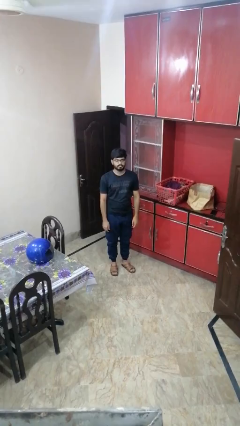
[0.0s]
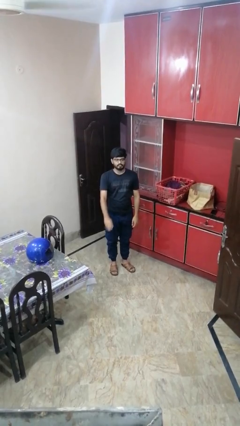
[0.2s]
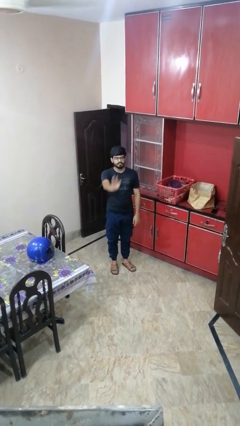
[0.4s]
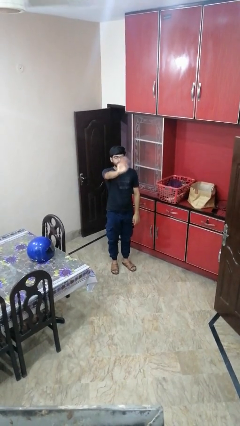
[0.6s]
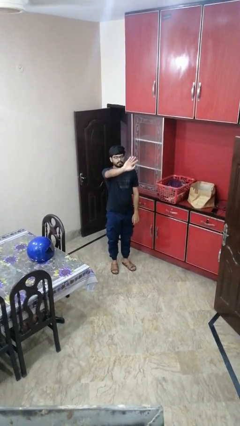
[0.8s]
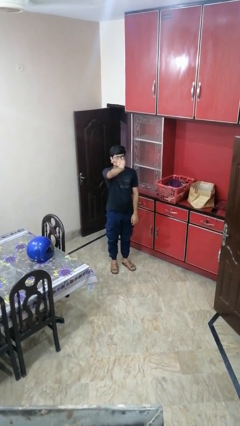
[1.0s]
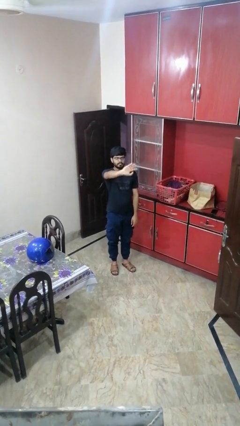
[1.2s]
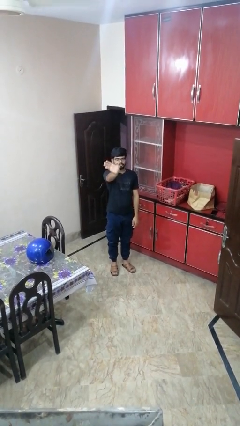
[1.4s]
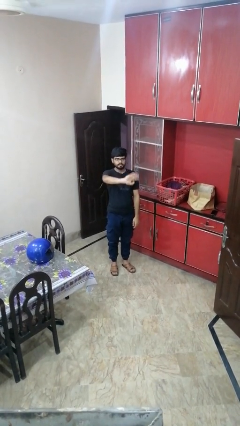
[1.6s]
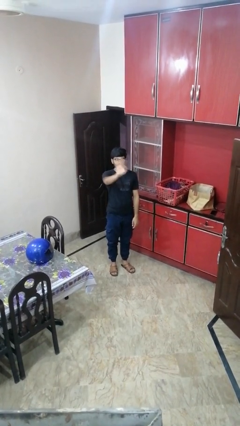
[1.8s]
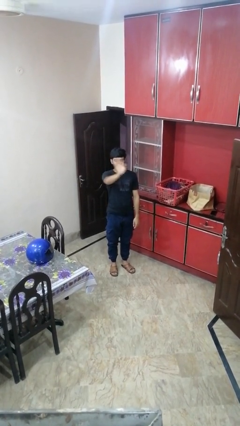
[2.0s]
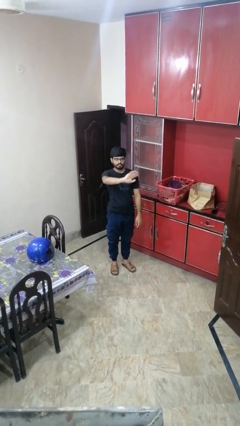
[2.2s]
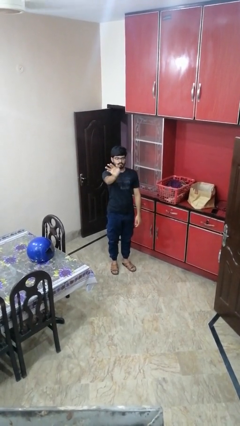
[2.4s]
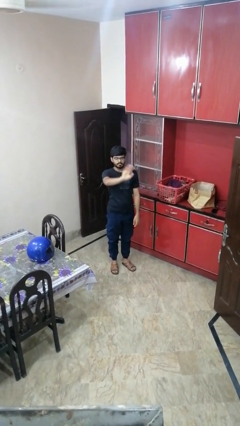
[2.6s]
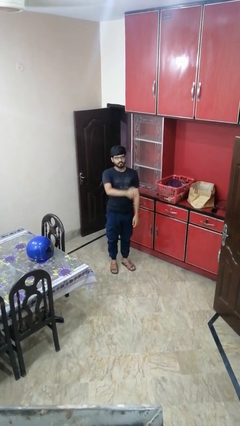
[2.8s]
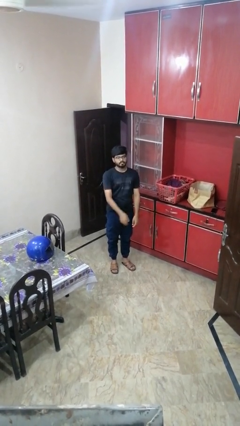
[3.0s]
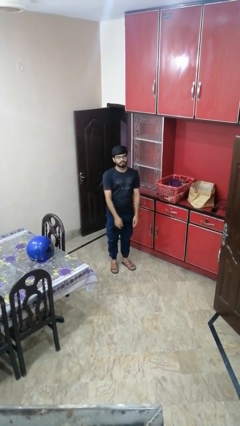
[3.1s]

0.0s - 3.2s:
person waves at person

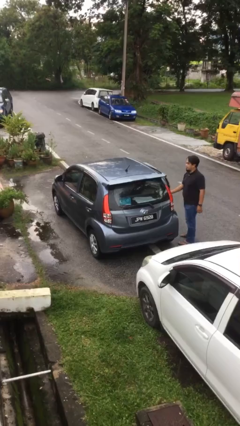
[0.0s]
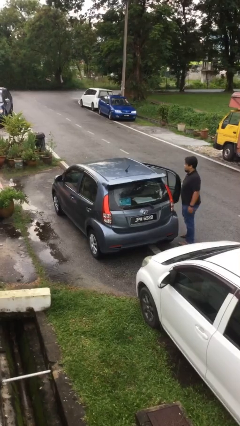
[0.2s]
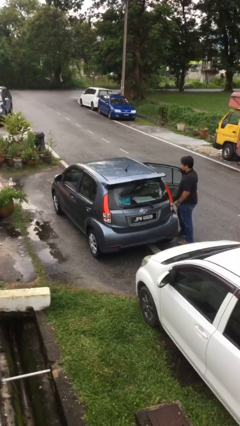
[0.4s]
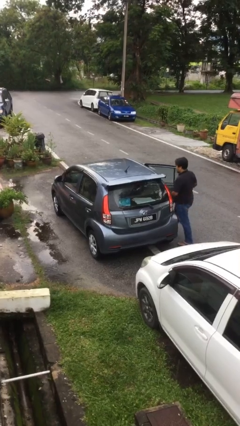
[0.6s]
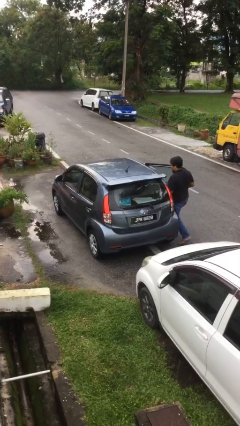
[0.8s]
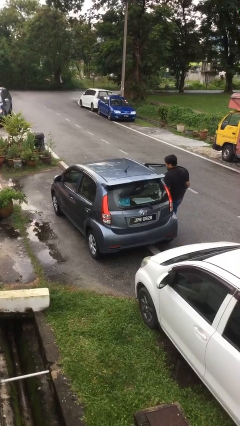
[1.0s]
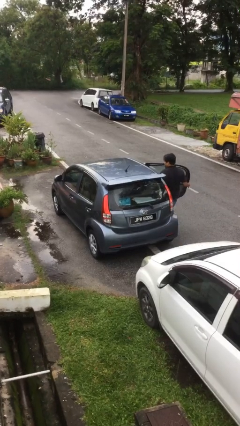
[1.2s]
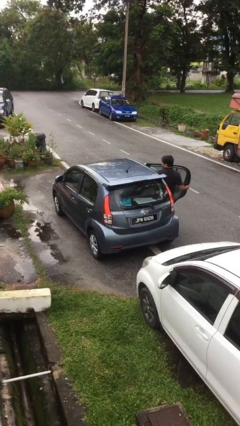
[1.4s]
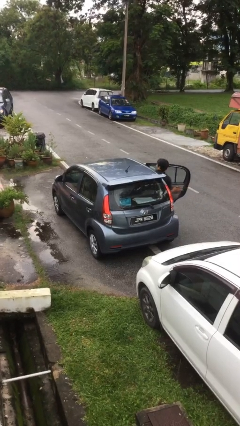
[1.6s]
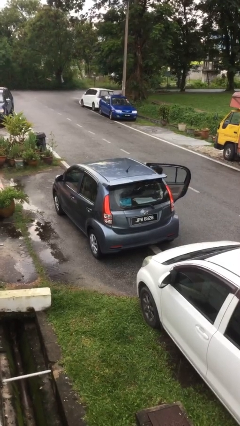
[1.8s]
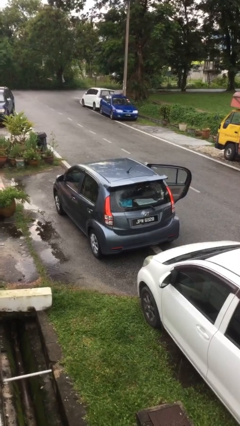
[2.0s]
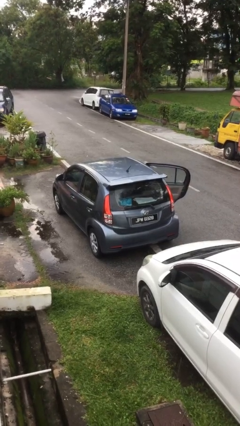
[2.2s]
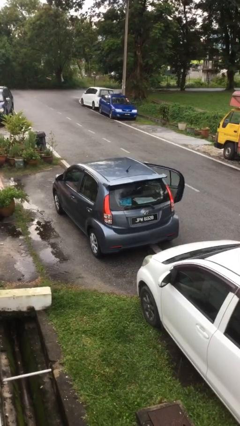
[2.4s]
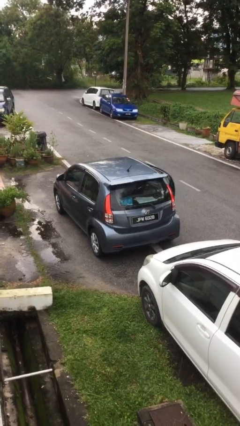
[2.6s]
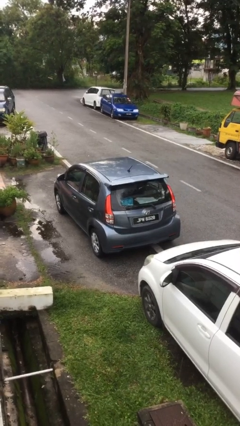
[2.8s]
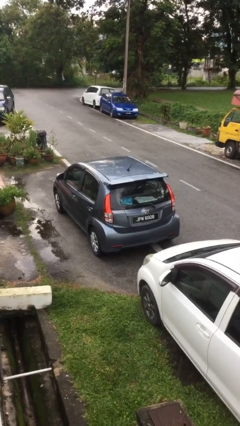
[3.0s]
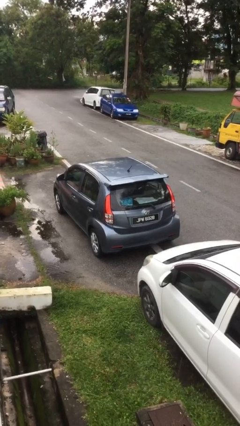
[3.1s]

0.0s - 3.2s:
car picks up person

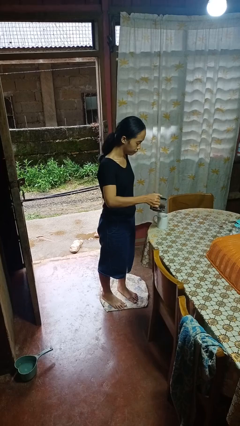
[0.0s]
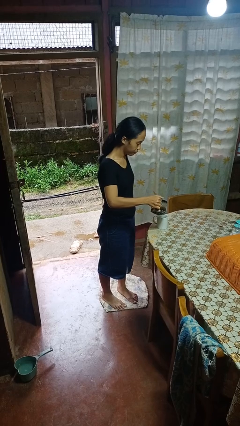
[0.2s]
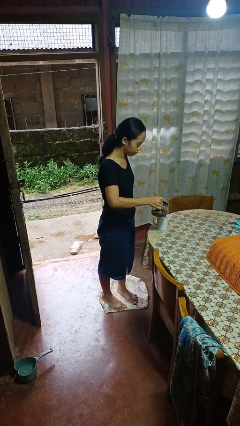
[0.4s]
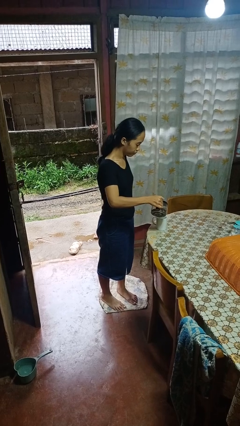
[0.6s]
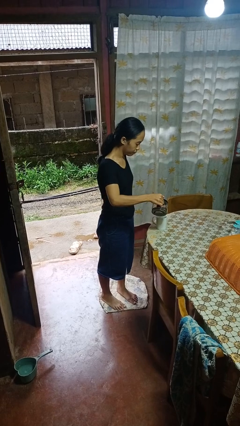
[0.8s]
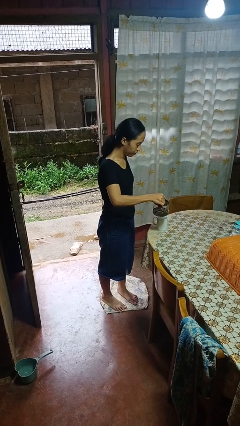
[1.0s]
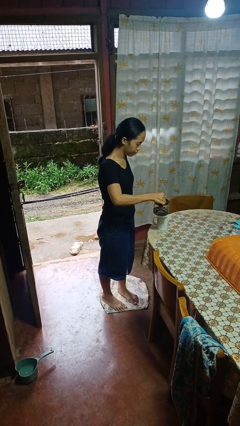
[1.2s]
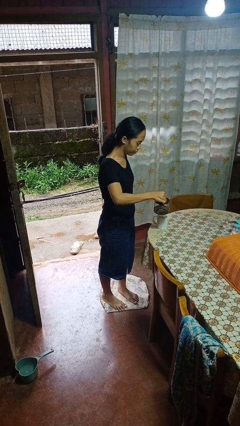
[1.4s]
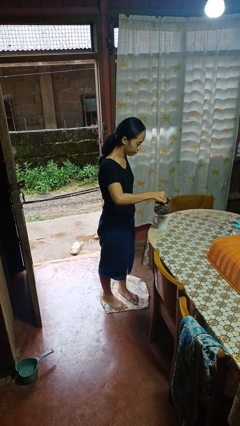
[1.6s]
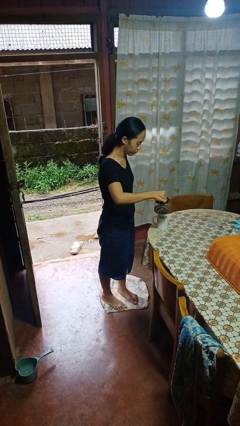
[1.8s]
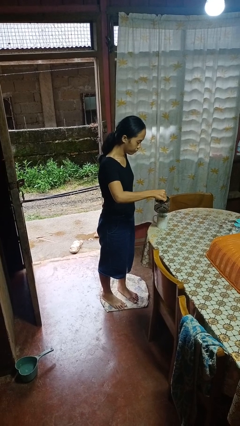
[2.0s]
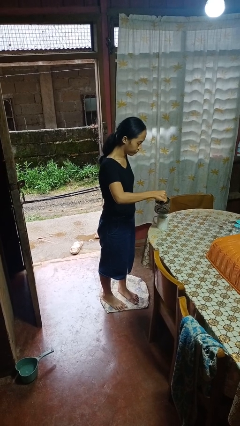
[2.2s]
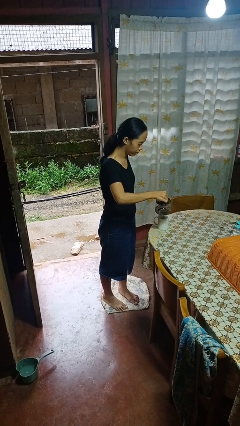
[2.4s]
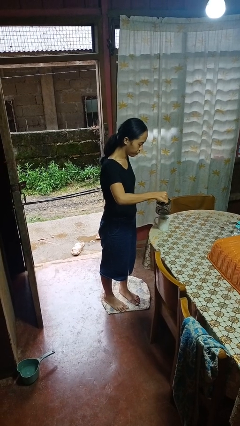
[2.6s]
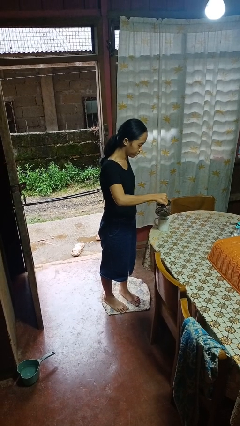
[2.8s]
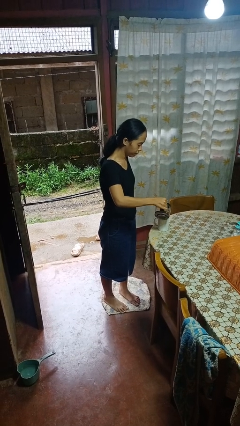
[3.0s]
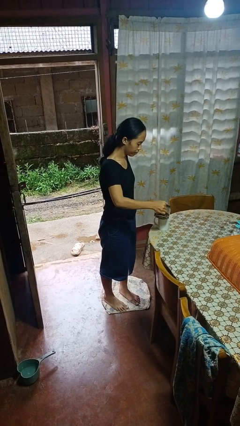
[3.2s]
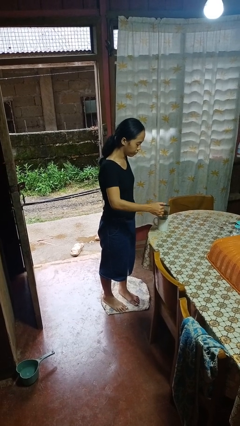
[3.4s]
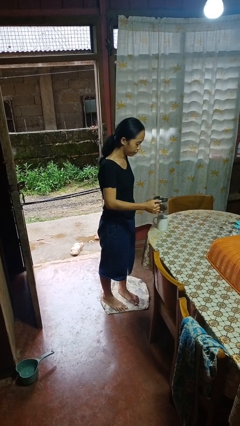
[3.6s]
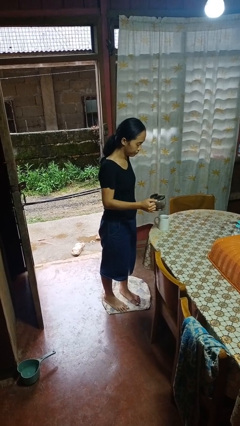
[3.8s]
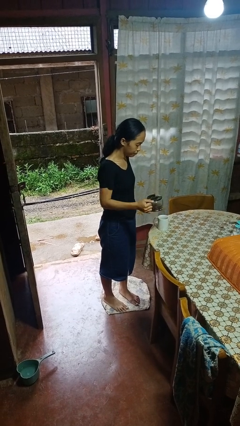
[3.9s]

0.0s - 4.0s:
person pours coffee into mug

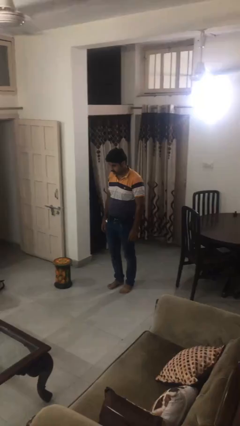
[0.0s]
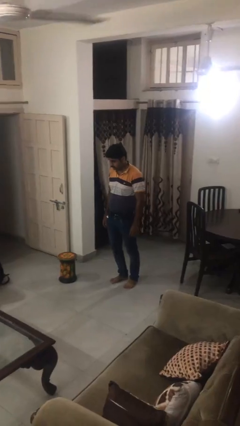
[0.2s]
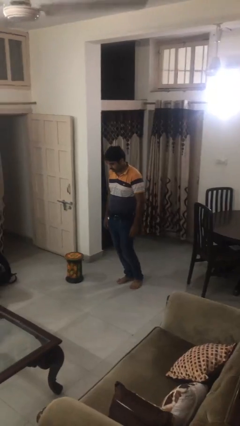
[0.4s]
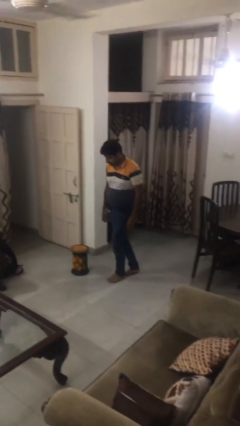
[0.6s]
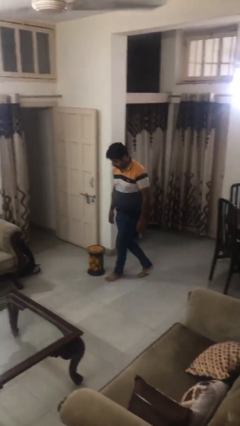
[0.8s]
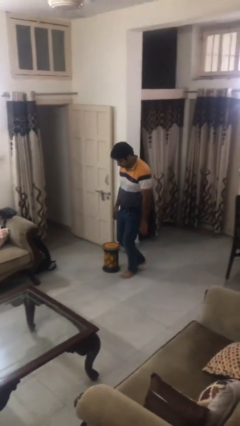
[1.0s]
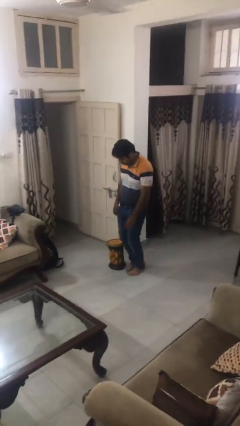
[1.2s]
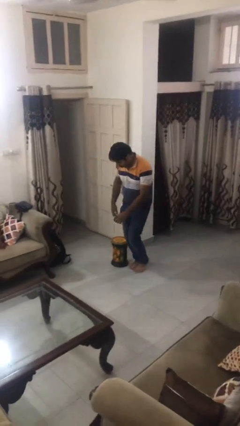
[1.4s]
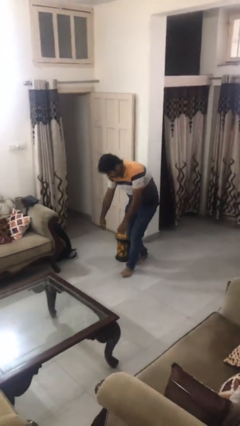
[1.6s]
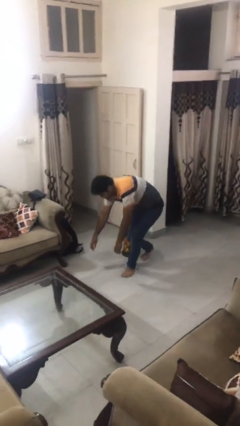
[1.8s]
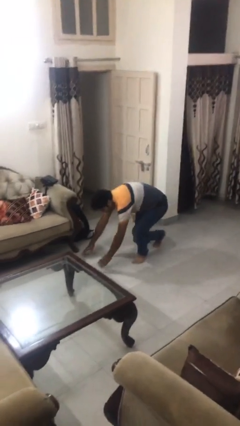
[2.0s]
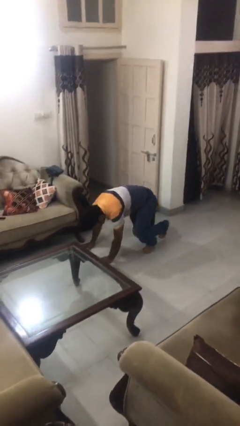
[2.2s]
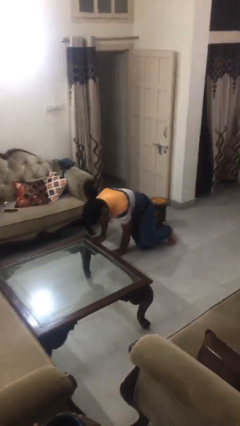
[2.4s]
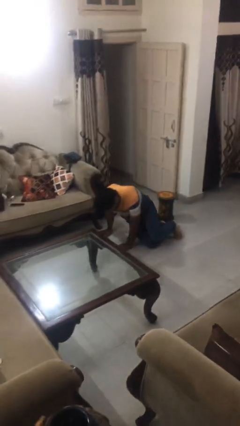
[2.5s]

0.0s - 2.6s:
person trips on object on floor

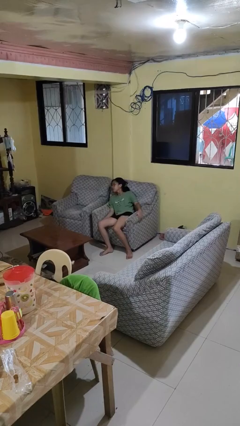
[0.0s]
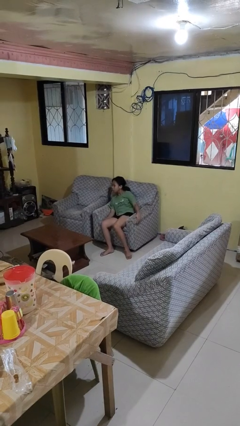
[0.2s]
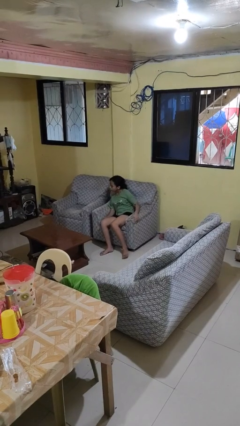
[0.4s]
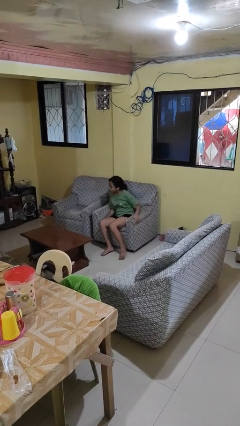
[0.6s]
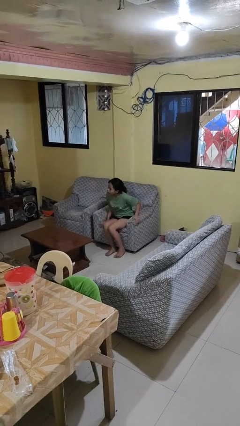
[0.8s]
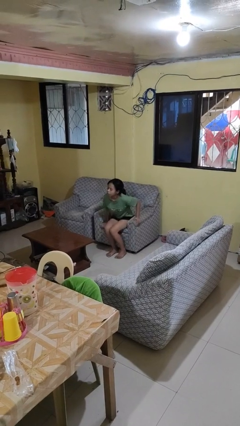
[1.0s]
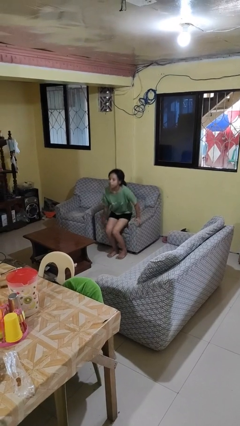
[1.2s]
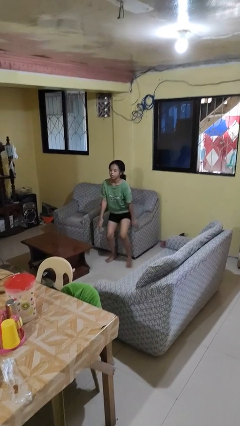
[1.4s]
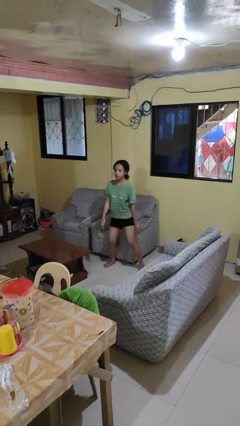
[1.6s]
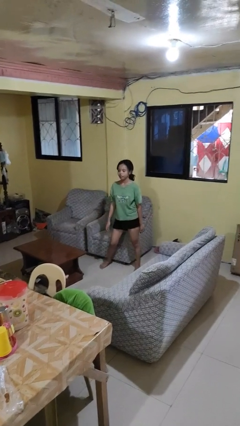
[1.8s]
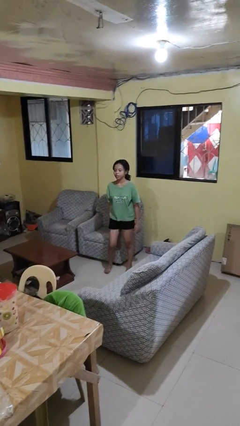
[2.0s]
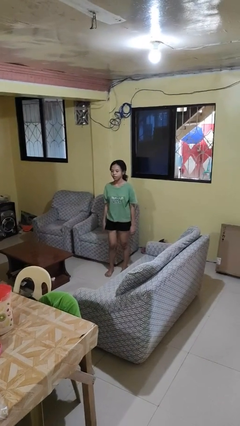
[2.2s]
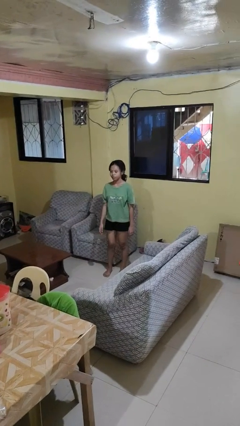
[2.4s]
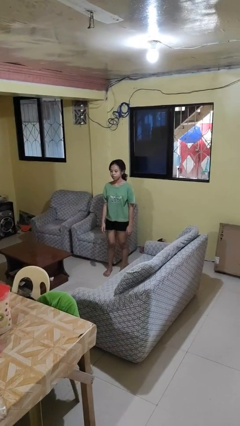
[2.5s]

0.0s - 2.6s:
person stands up

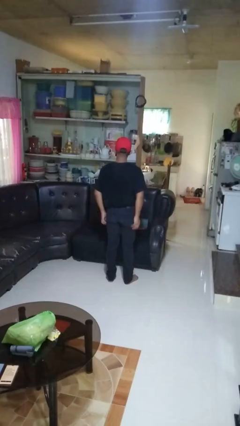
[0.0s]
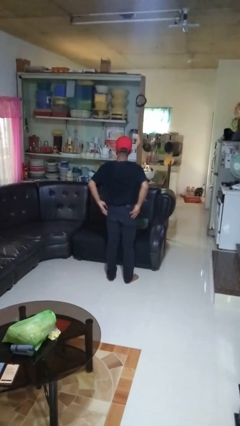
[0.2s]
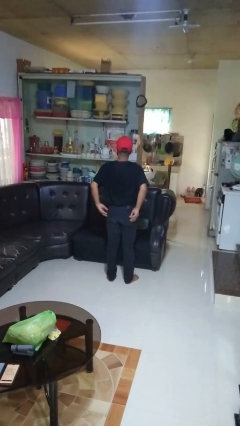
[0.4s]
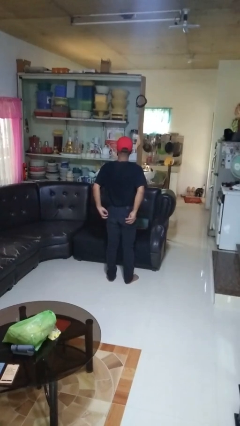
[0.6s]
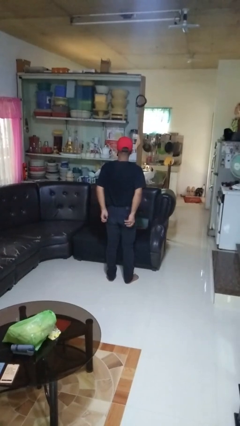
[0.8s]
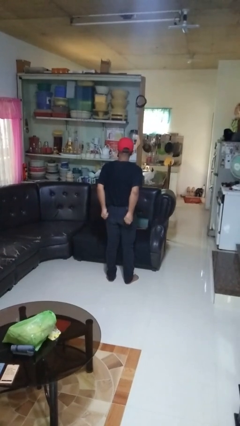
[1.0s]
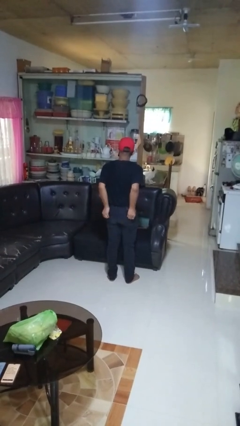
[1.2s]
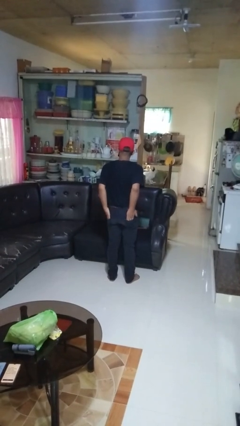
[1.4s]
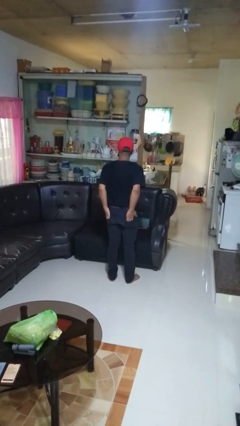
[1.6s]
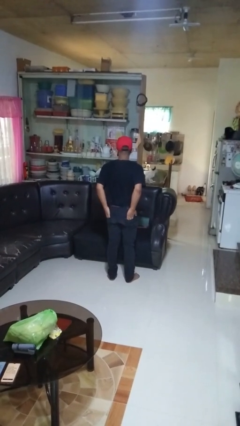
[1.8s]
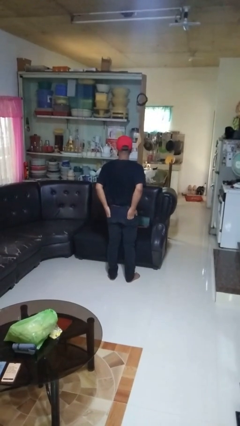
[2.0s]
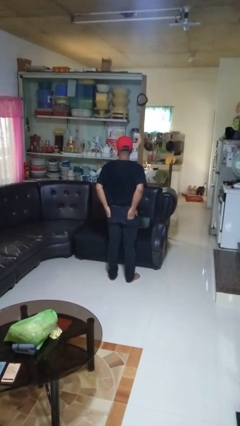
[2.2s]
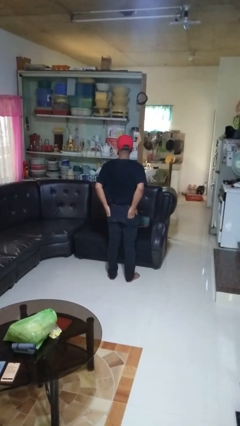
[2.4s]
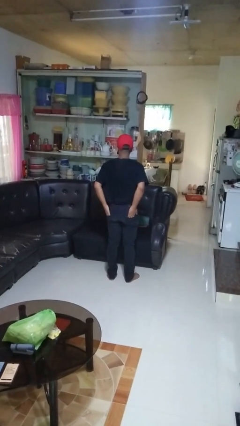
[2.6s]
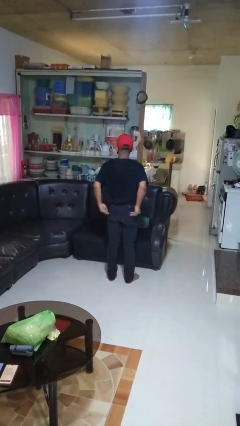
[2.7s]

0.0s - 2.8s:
person puts hands in back pockets
